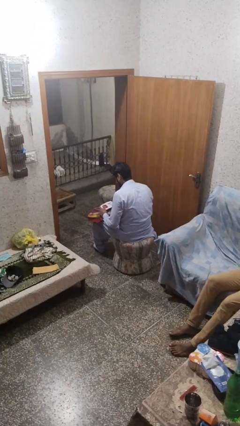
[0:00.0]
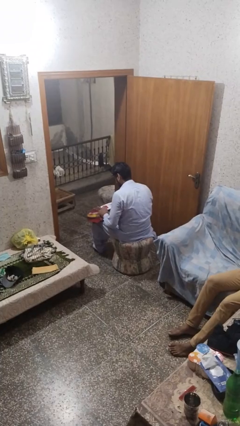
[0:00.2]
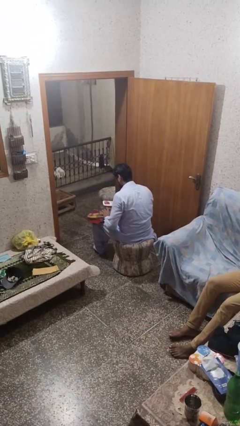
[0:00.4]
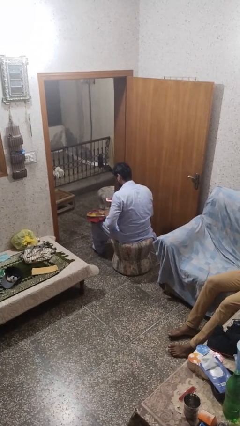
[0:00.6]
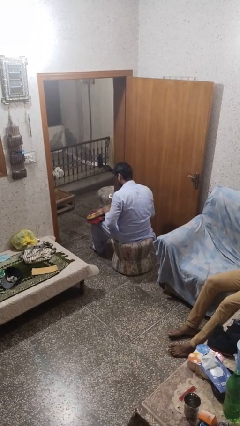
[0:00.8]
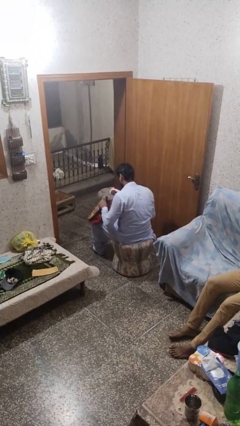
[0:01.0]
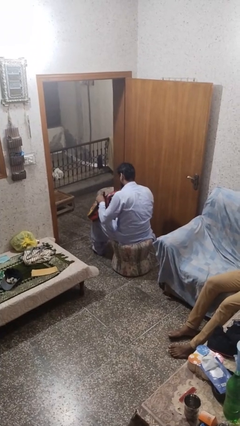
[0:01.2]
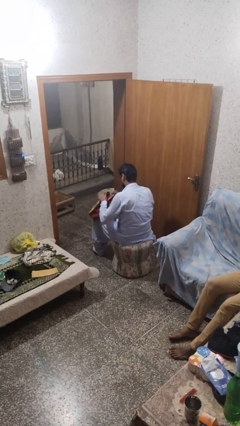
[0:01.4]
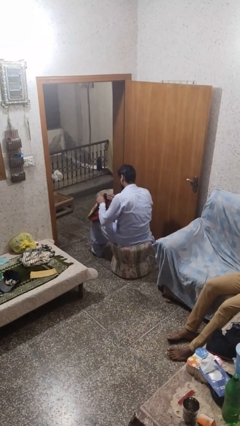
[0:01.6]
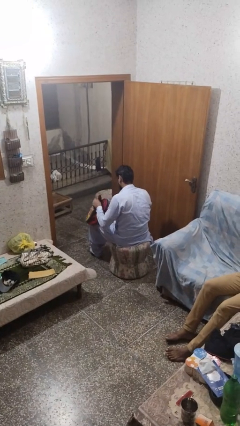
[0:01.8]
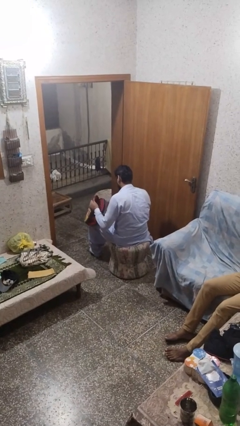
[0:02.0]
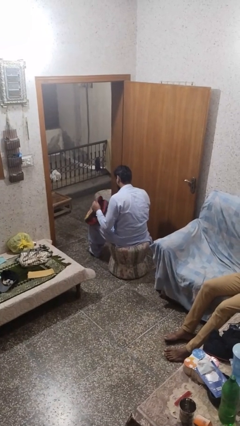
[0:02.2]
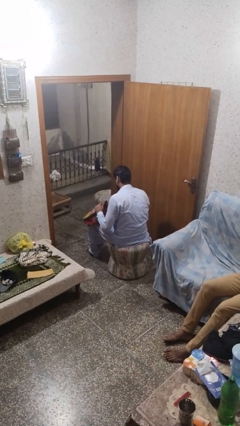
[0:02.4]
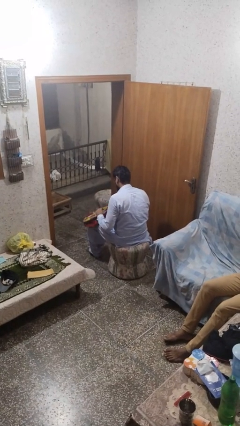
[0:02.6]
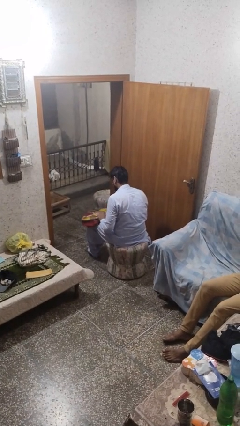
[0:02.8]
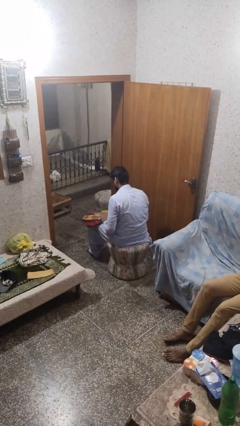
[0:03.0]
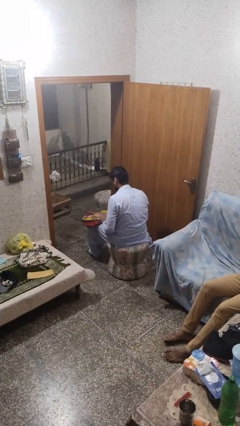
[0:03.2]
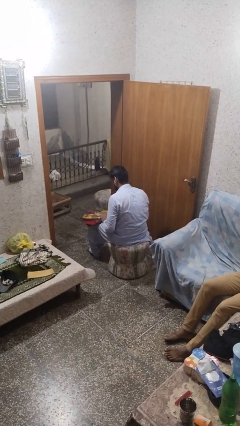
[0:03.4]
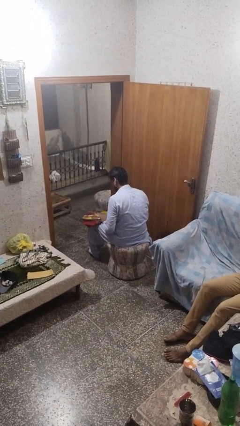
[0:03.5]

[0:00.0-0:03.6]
person puts object into backpack

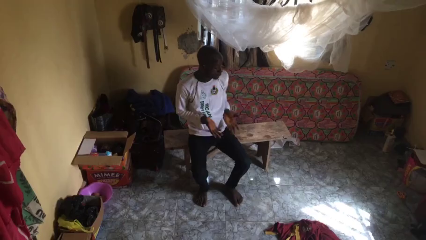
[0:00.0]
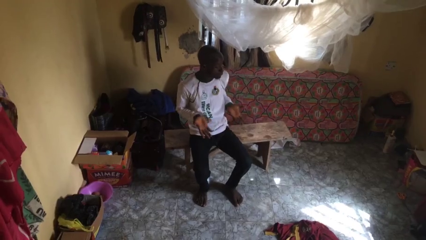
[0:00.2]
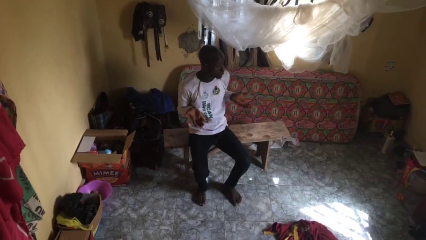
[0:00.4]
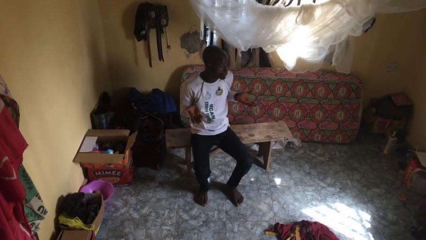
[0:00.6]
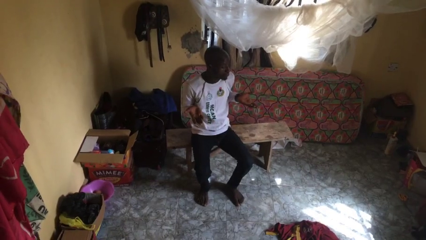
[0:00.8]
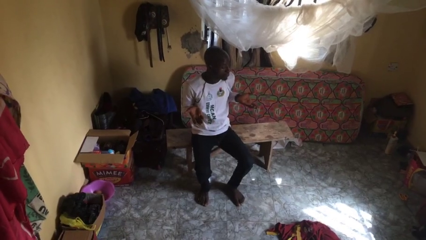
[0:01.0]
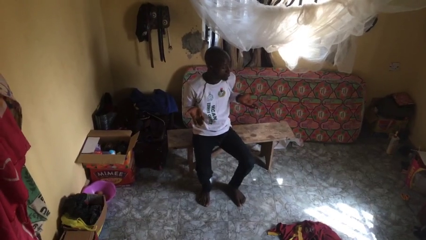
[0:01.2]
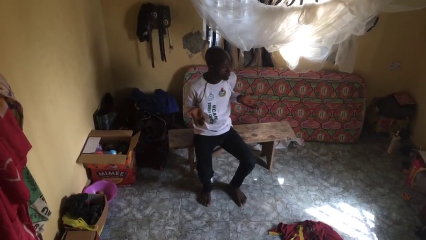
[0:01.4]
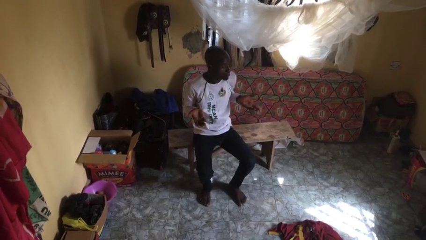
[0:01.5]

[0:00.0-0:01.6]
person shrugs

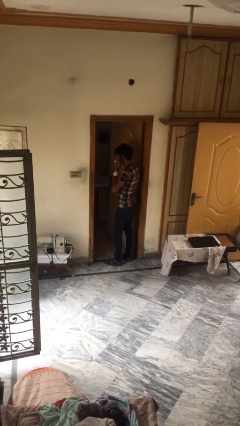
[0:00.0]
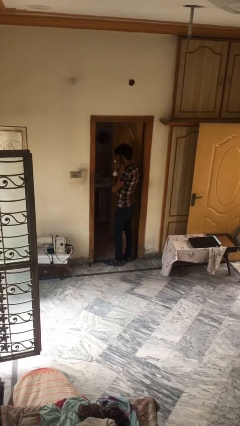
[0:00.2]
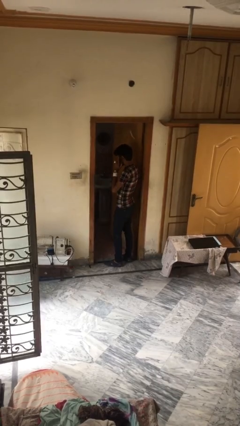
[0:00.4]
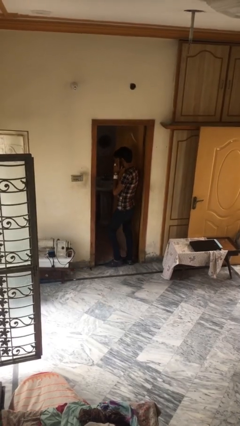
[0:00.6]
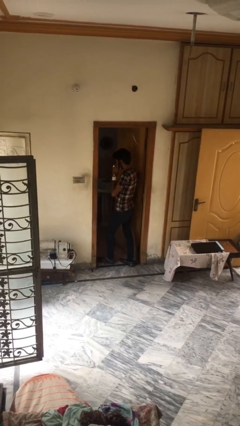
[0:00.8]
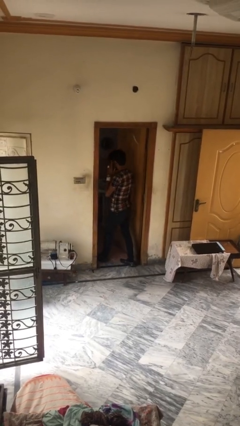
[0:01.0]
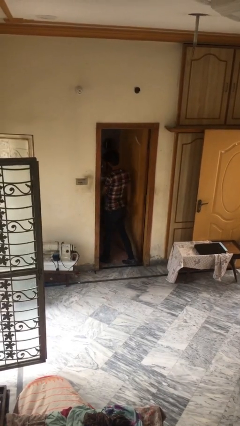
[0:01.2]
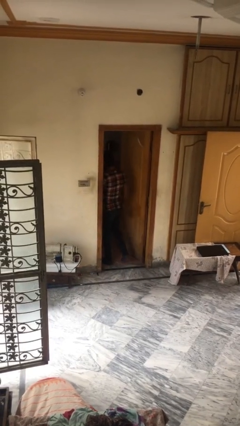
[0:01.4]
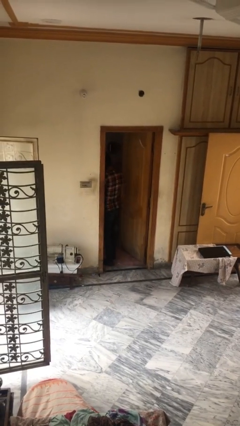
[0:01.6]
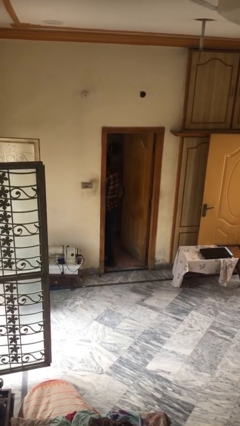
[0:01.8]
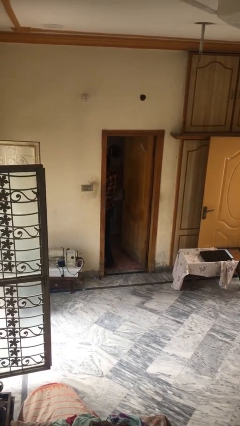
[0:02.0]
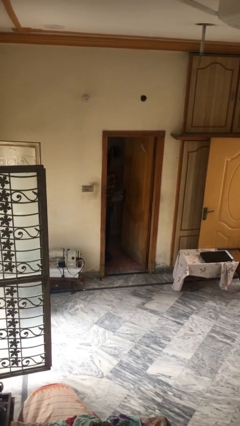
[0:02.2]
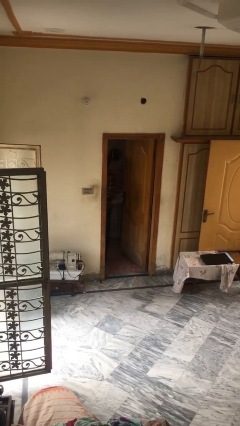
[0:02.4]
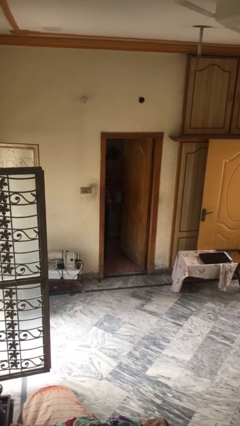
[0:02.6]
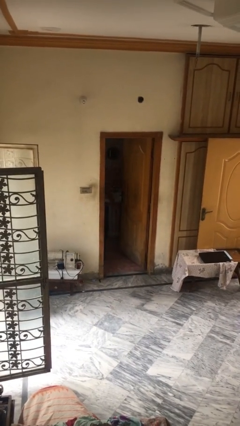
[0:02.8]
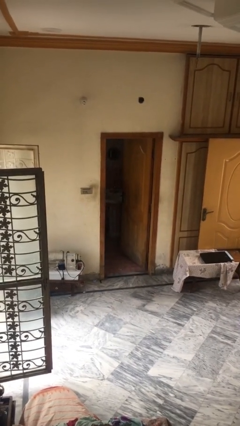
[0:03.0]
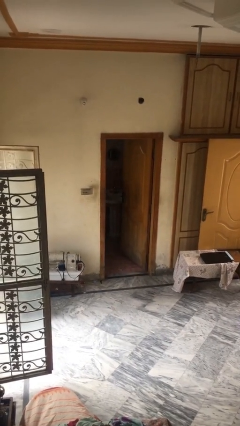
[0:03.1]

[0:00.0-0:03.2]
person exits scene through structure

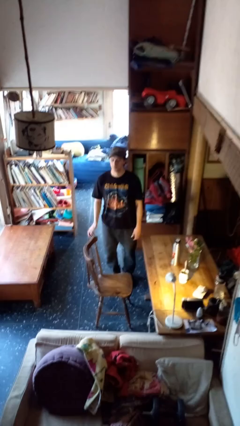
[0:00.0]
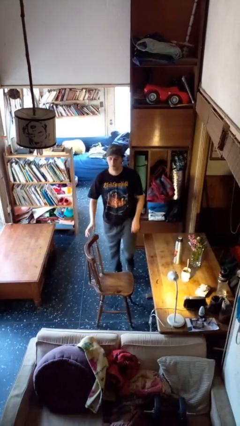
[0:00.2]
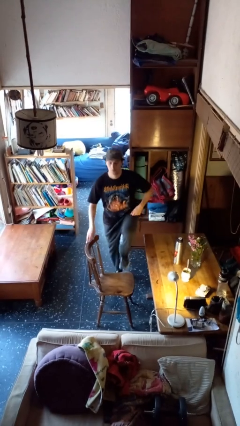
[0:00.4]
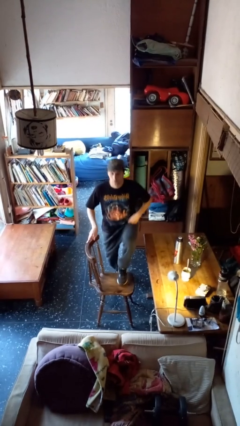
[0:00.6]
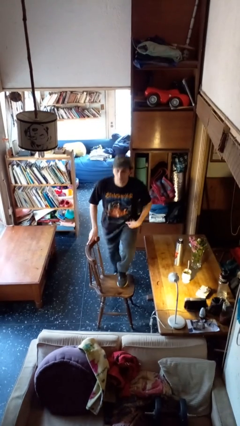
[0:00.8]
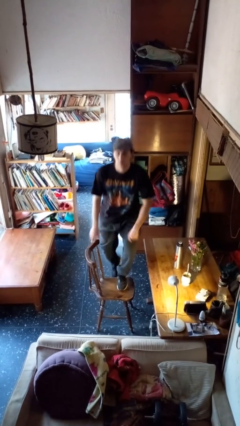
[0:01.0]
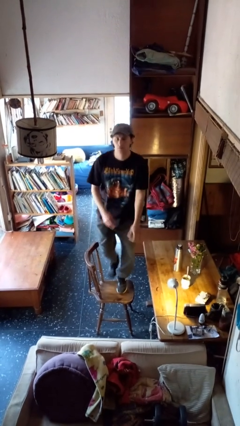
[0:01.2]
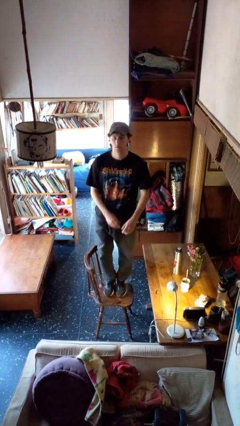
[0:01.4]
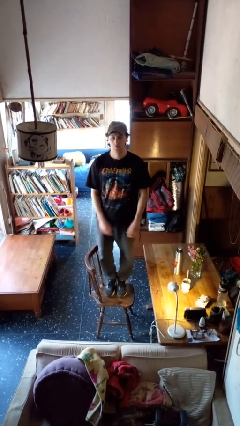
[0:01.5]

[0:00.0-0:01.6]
person climbs on chair

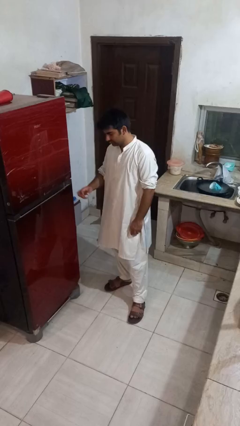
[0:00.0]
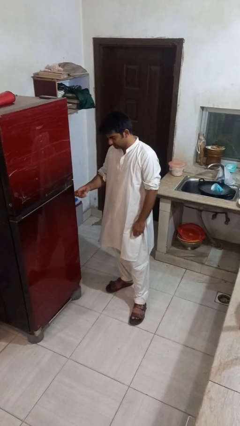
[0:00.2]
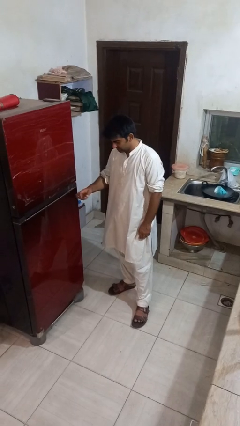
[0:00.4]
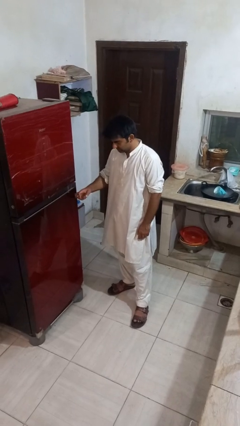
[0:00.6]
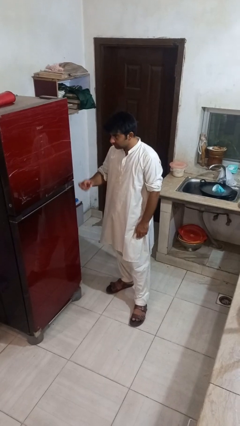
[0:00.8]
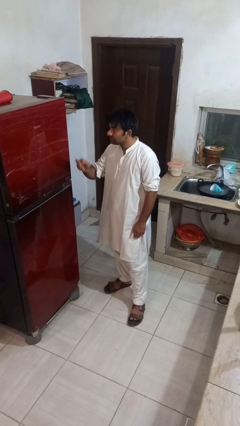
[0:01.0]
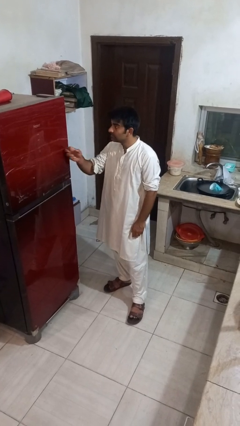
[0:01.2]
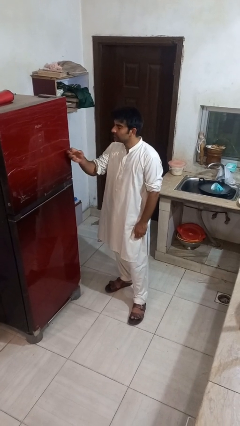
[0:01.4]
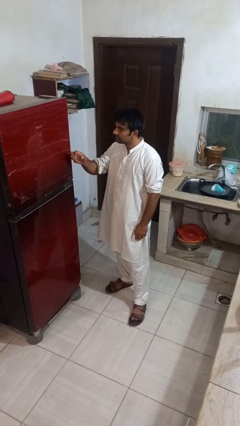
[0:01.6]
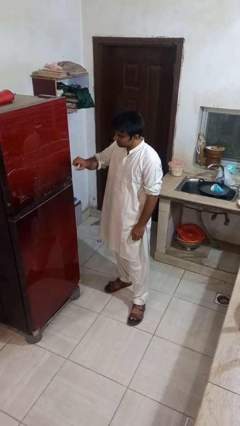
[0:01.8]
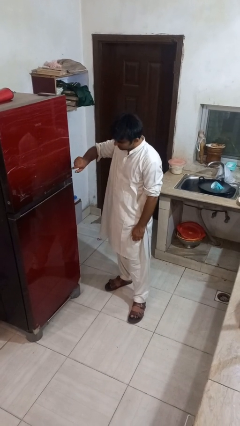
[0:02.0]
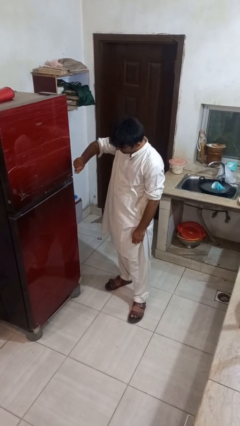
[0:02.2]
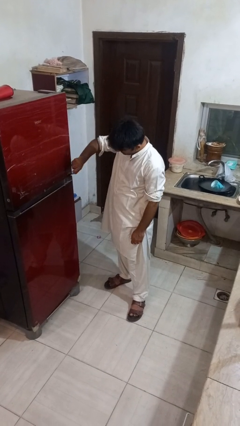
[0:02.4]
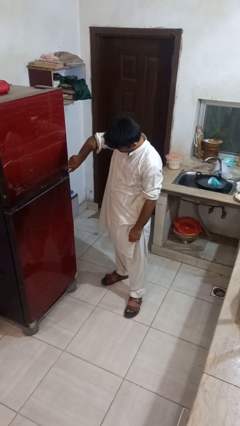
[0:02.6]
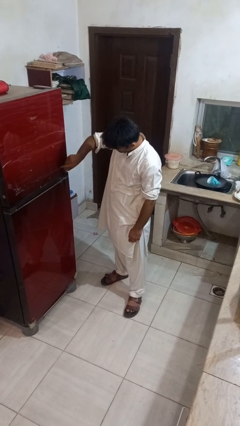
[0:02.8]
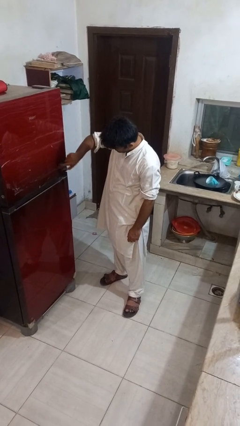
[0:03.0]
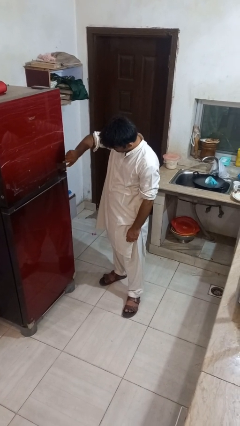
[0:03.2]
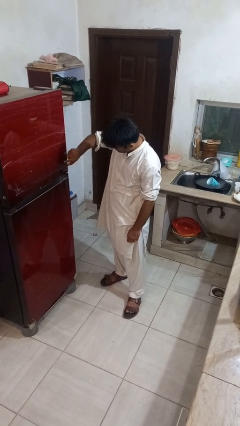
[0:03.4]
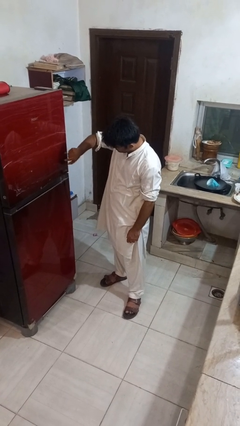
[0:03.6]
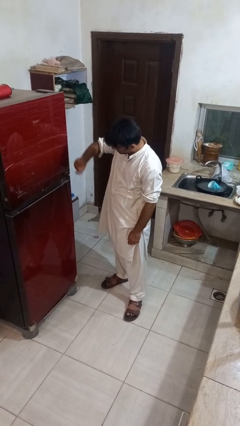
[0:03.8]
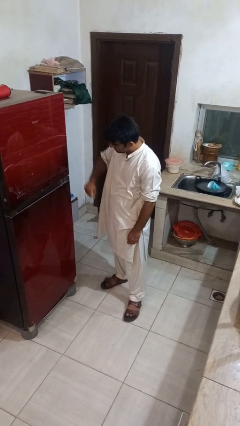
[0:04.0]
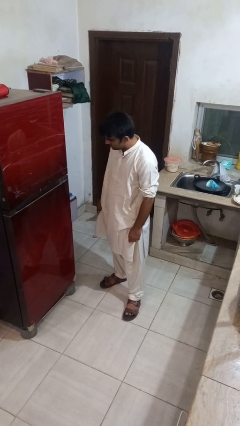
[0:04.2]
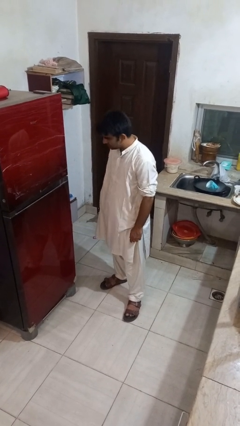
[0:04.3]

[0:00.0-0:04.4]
person taps object with finger

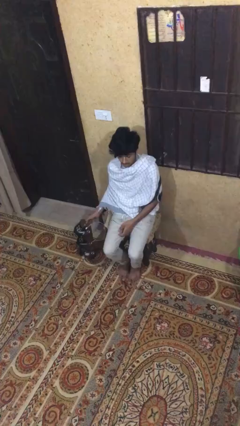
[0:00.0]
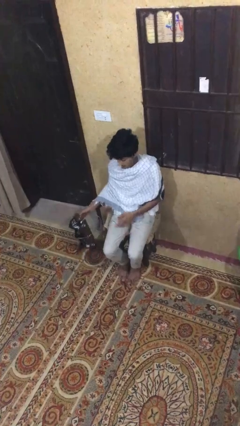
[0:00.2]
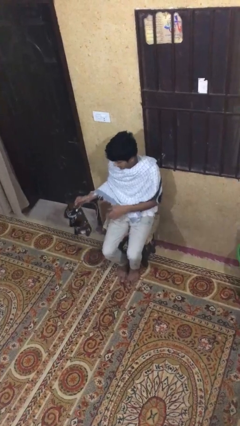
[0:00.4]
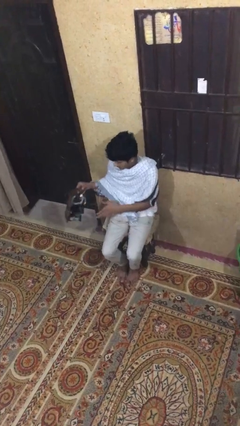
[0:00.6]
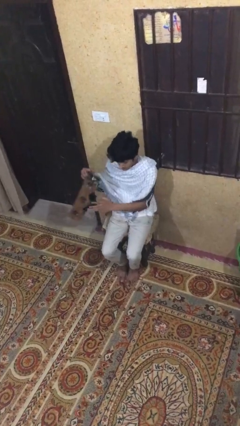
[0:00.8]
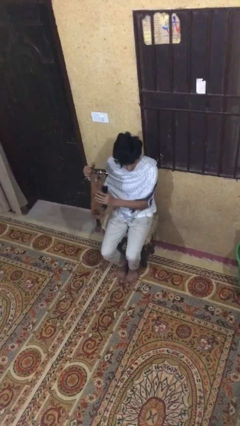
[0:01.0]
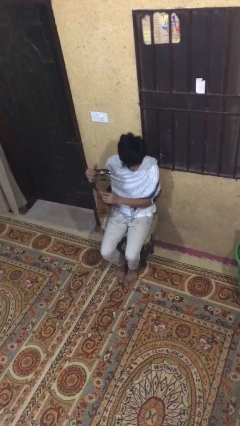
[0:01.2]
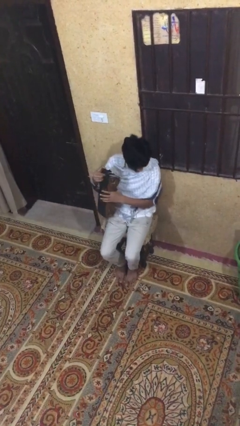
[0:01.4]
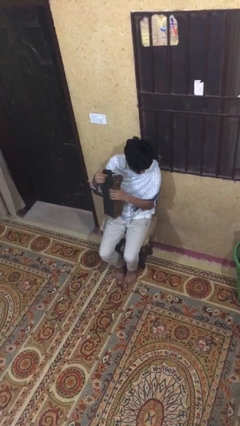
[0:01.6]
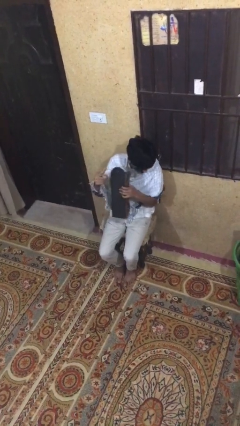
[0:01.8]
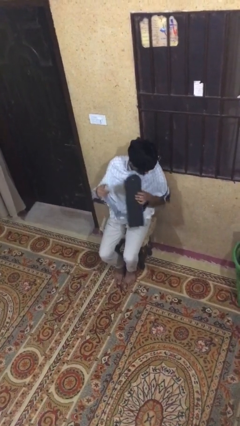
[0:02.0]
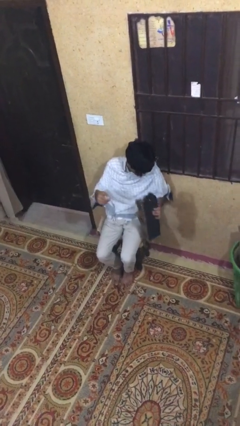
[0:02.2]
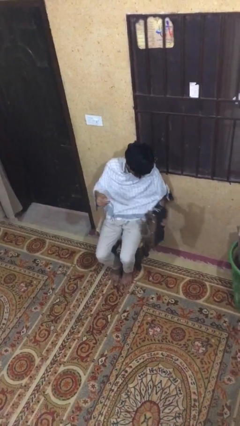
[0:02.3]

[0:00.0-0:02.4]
person picks up object from floor
